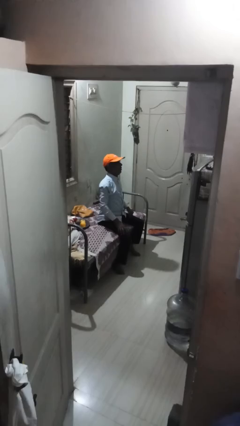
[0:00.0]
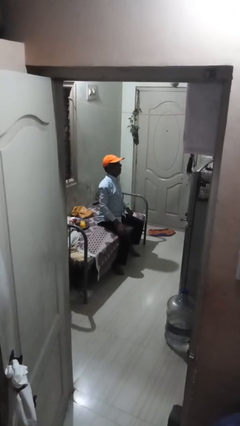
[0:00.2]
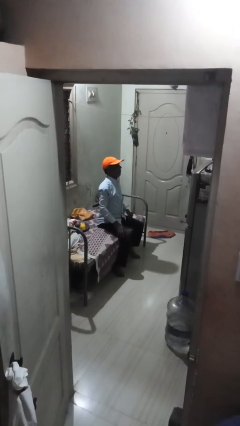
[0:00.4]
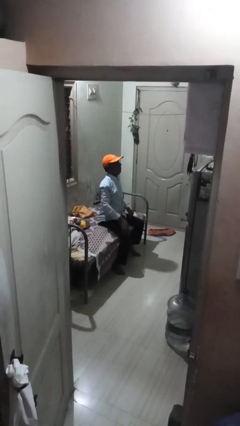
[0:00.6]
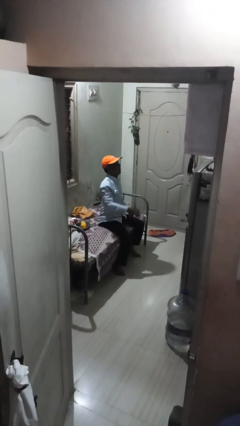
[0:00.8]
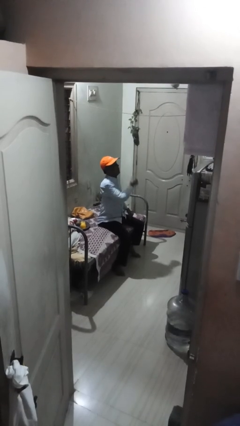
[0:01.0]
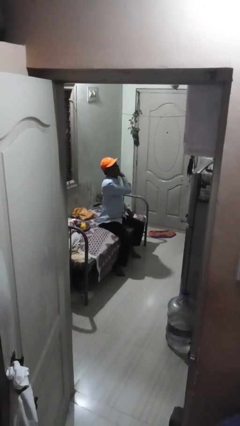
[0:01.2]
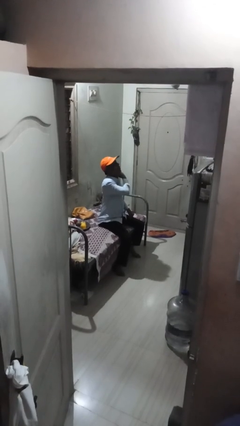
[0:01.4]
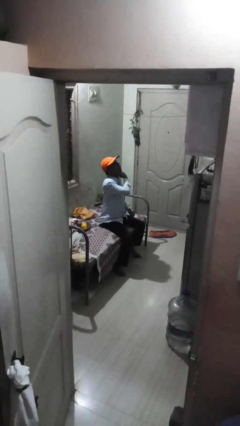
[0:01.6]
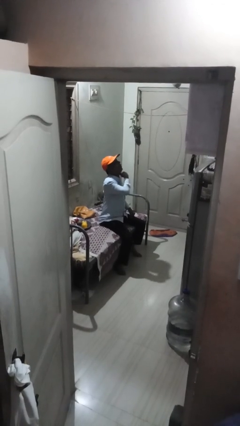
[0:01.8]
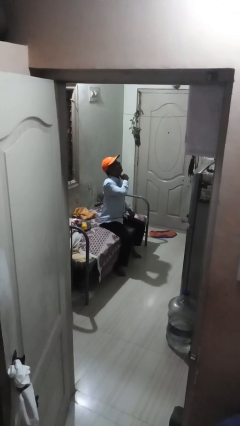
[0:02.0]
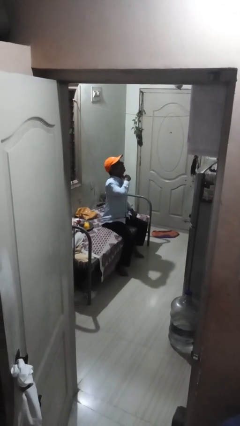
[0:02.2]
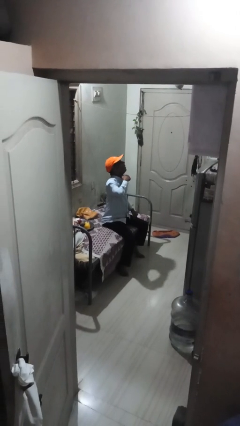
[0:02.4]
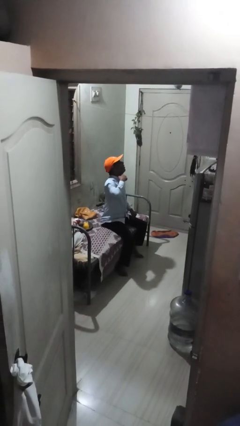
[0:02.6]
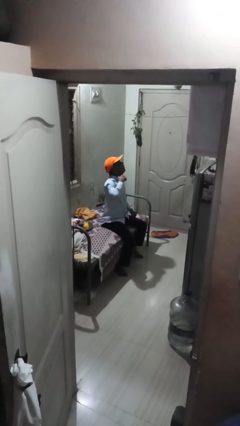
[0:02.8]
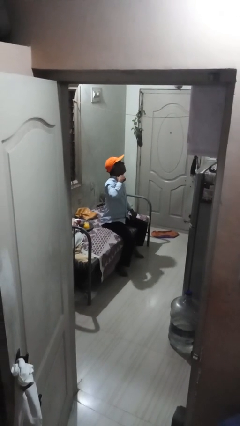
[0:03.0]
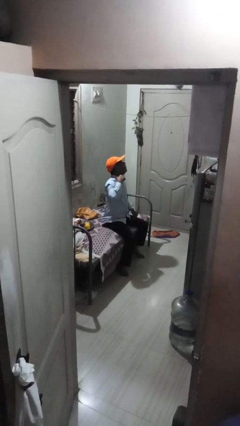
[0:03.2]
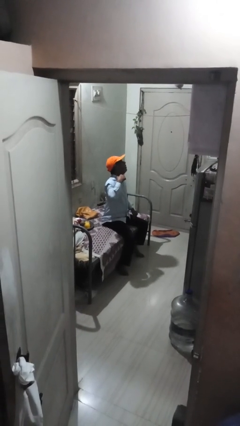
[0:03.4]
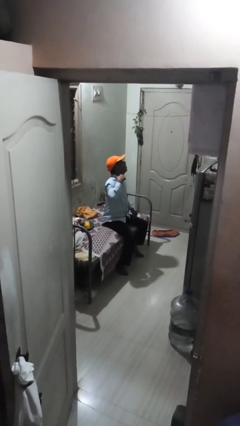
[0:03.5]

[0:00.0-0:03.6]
person gestures cut

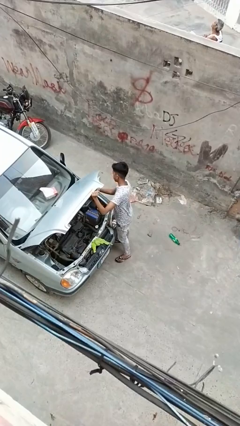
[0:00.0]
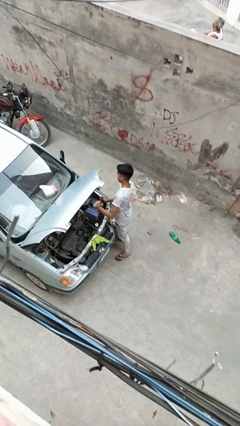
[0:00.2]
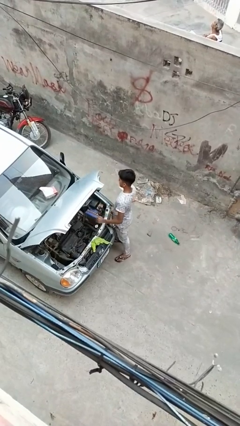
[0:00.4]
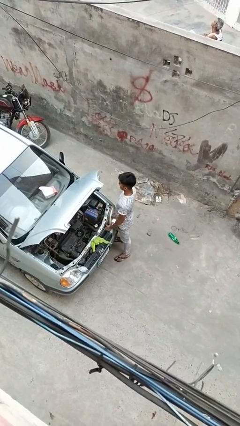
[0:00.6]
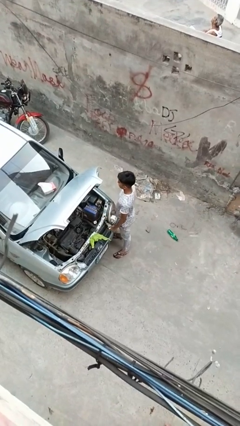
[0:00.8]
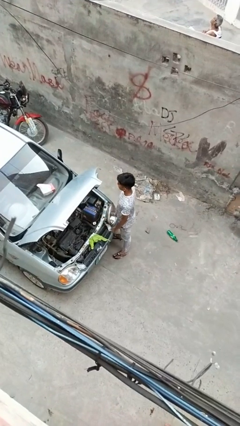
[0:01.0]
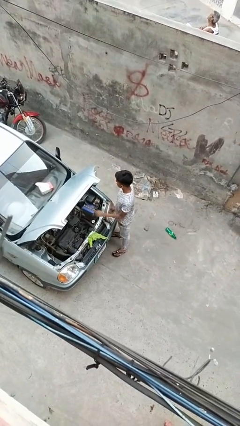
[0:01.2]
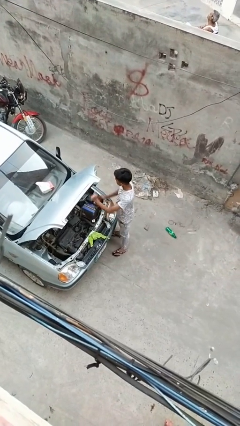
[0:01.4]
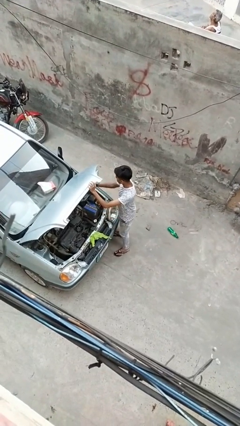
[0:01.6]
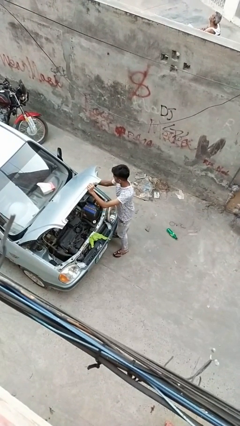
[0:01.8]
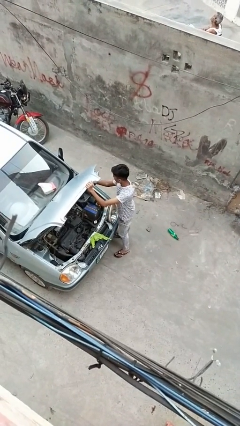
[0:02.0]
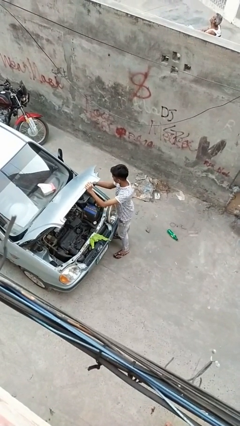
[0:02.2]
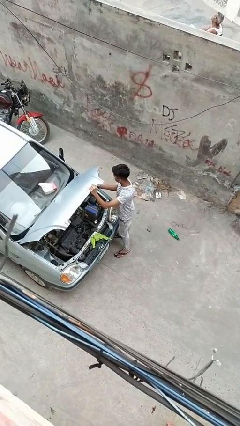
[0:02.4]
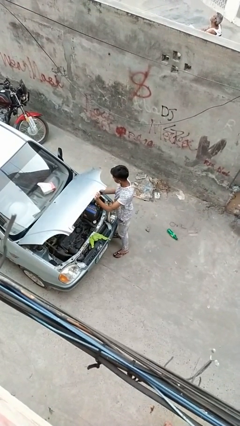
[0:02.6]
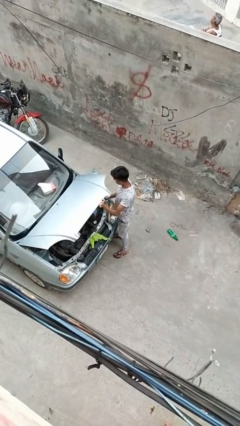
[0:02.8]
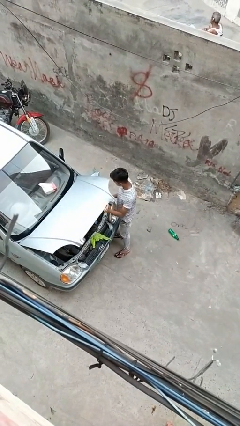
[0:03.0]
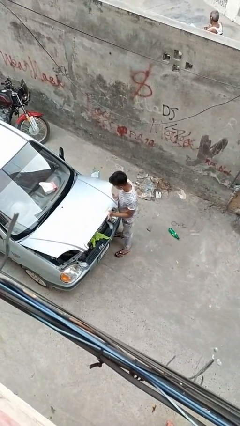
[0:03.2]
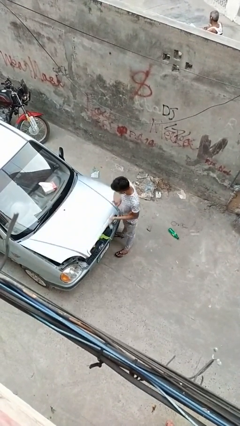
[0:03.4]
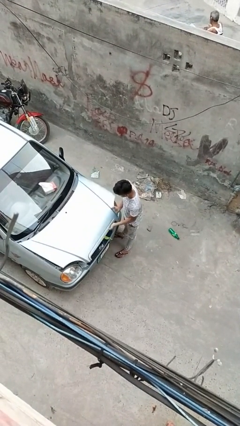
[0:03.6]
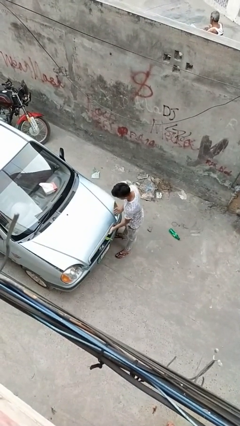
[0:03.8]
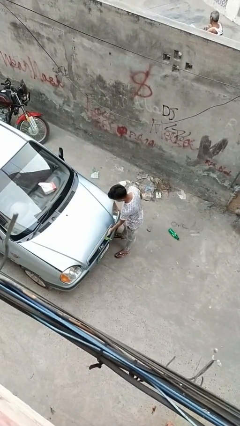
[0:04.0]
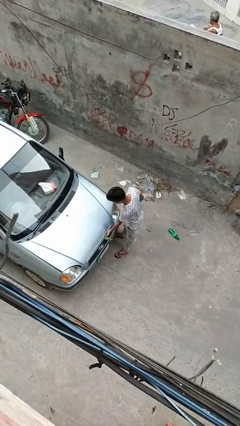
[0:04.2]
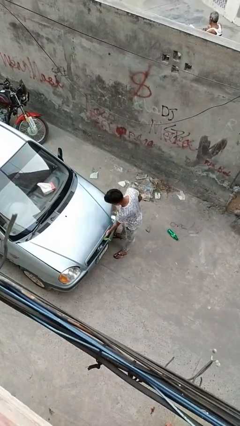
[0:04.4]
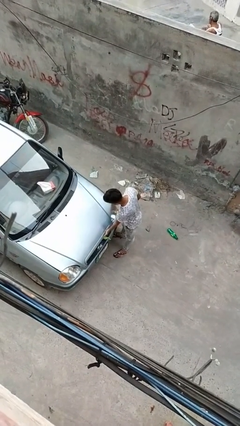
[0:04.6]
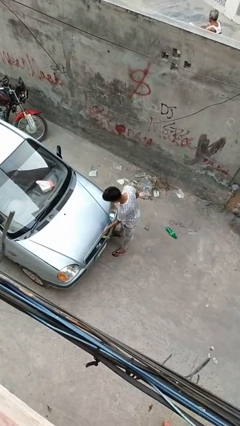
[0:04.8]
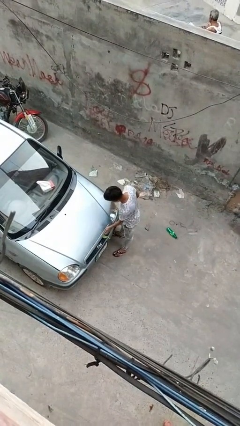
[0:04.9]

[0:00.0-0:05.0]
person closes car hood

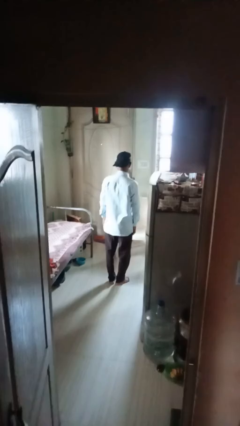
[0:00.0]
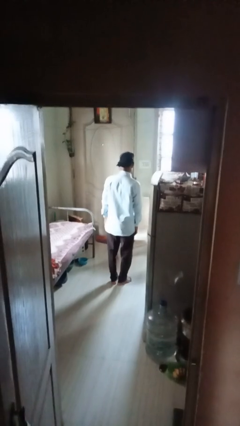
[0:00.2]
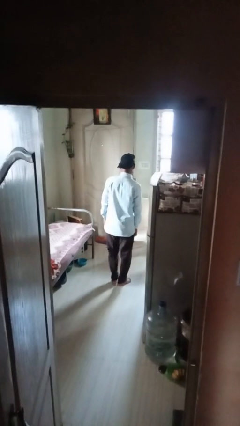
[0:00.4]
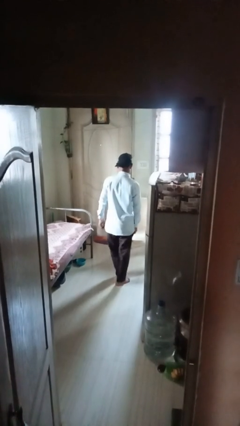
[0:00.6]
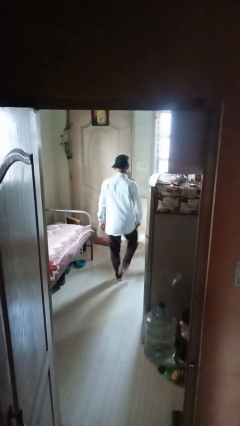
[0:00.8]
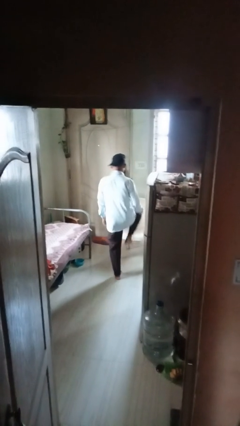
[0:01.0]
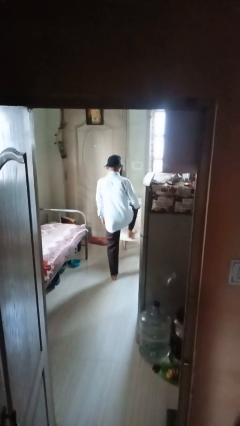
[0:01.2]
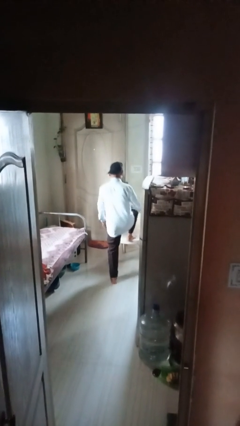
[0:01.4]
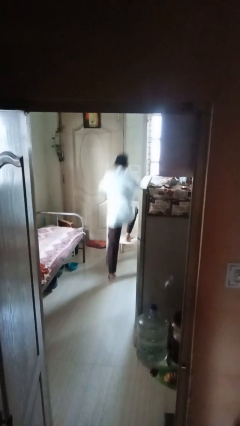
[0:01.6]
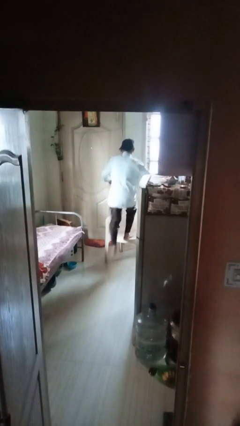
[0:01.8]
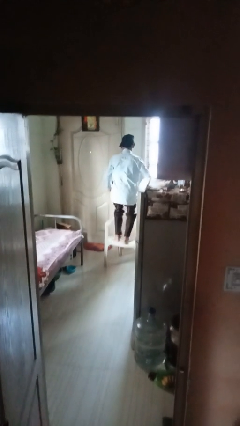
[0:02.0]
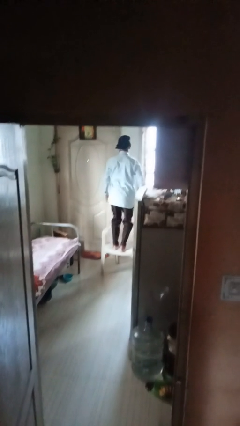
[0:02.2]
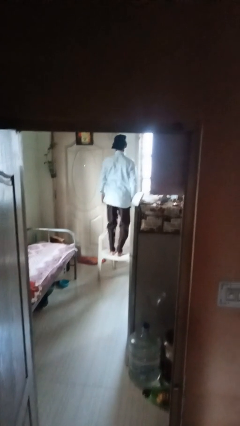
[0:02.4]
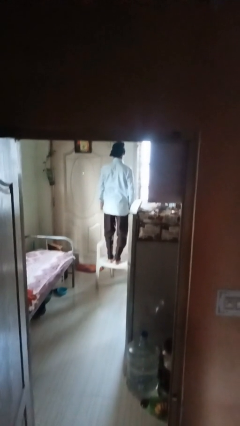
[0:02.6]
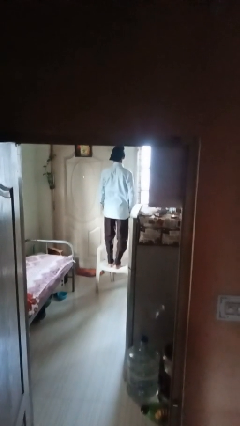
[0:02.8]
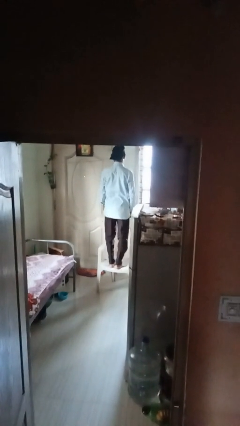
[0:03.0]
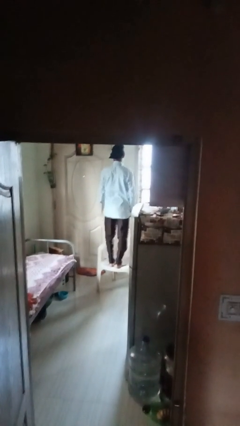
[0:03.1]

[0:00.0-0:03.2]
person climbs on chair

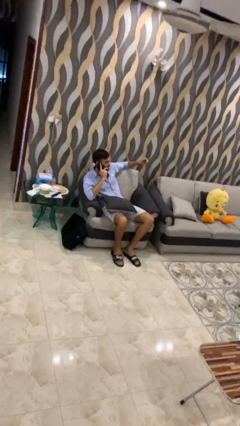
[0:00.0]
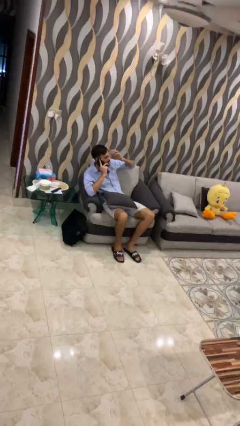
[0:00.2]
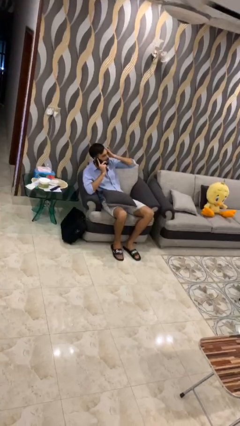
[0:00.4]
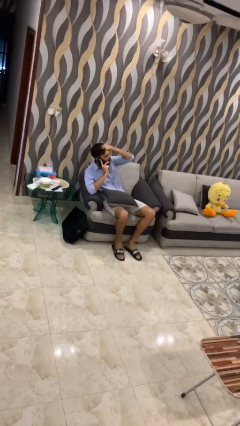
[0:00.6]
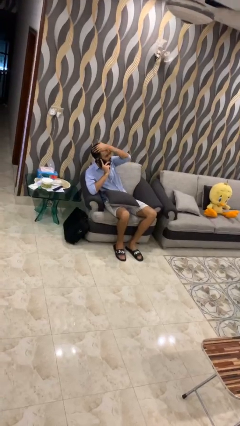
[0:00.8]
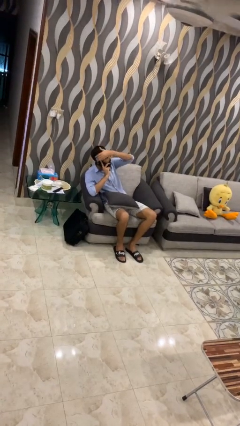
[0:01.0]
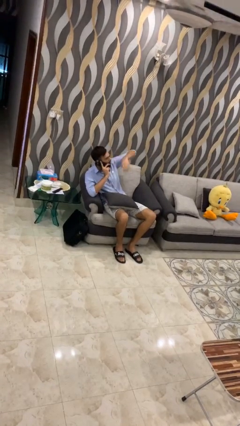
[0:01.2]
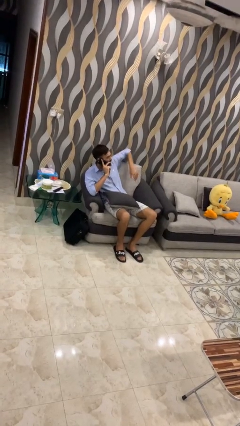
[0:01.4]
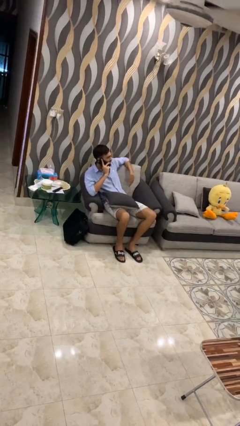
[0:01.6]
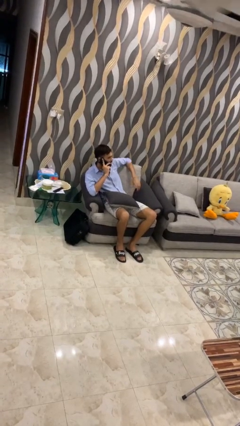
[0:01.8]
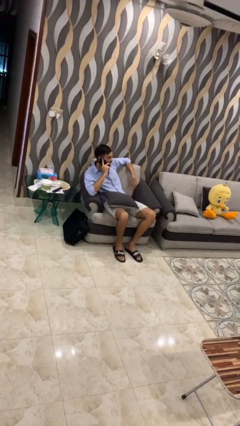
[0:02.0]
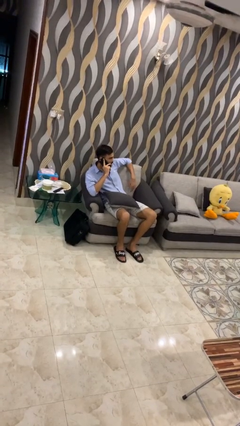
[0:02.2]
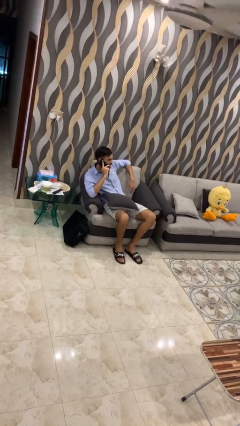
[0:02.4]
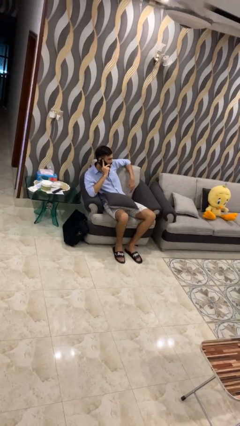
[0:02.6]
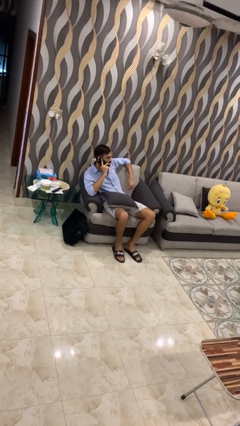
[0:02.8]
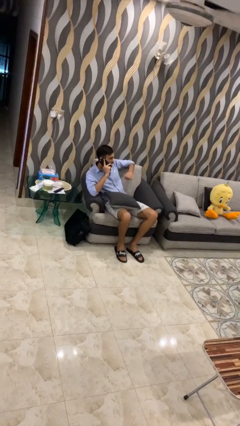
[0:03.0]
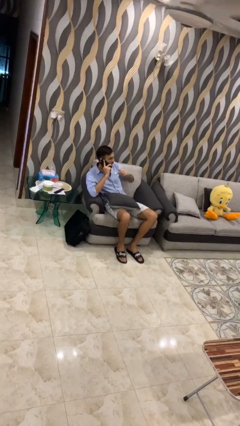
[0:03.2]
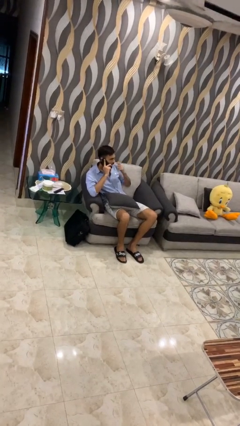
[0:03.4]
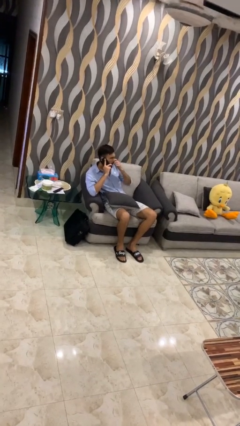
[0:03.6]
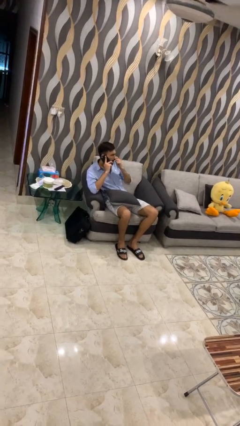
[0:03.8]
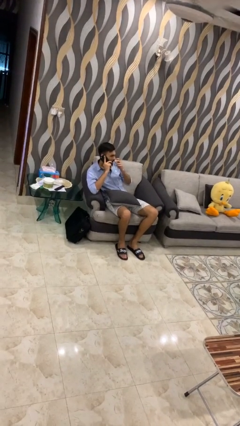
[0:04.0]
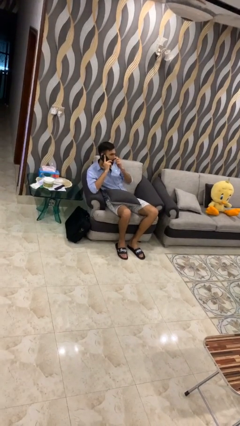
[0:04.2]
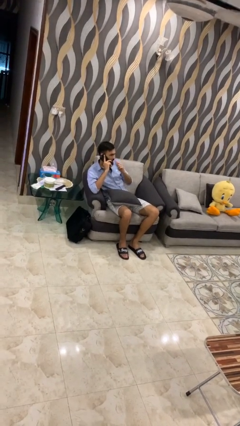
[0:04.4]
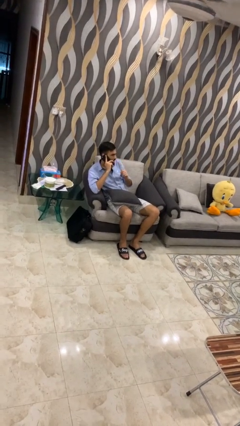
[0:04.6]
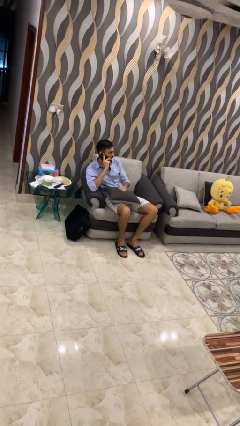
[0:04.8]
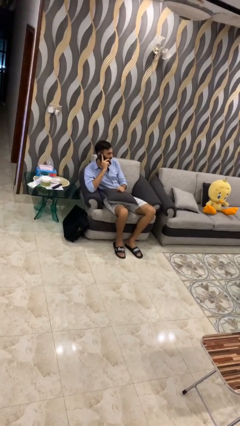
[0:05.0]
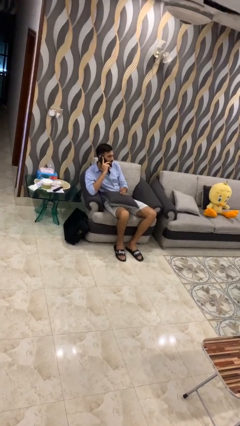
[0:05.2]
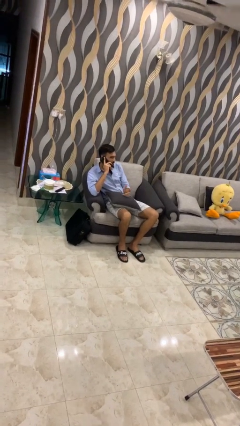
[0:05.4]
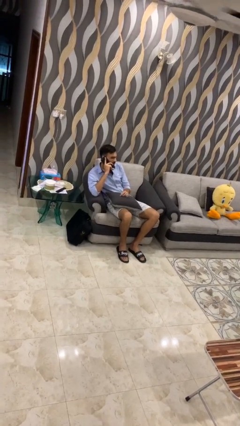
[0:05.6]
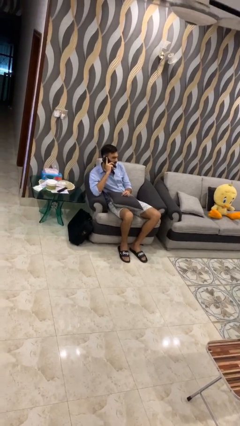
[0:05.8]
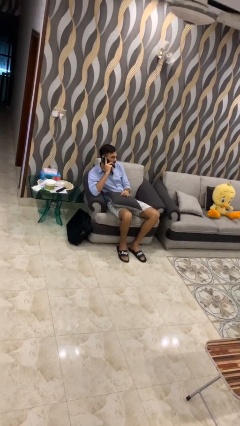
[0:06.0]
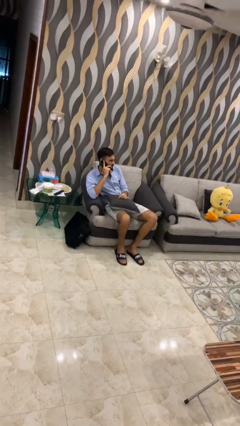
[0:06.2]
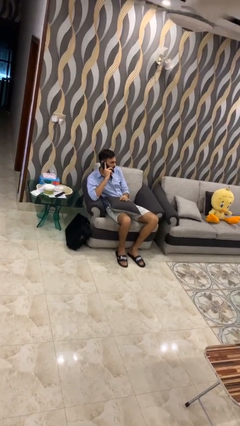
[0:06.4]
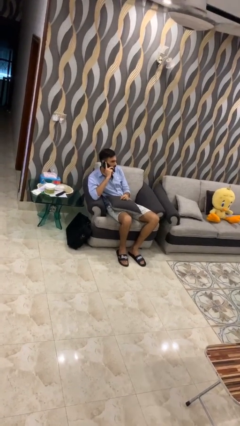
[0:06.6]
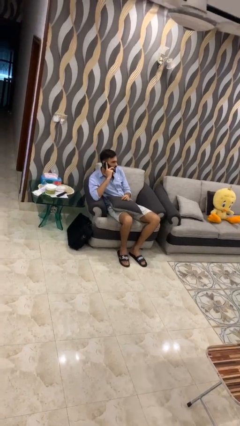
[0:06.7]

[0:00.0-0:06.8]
person talks on phone
